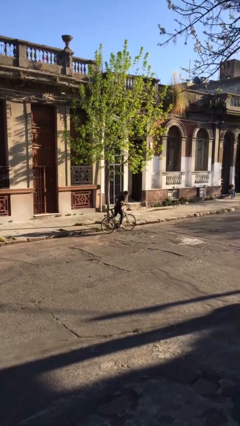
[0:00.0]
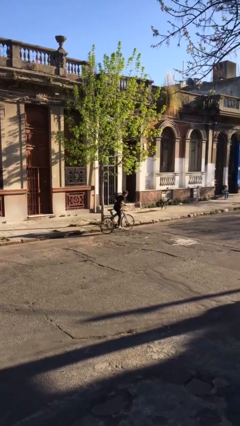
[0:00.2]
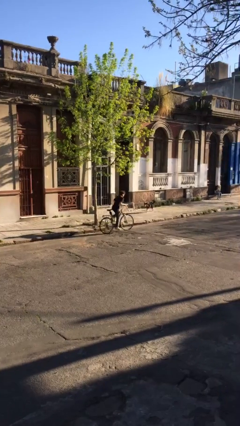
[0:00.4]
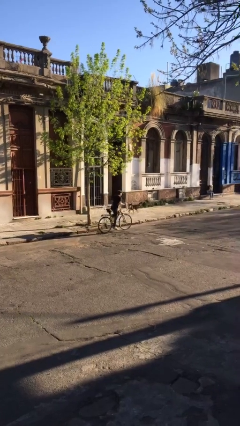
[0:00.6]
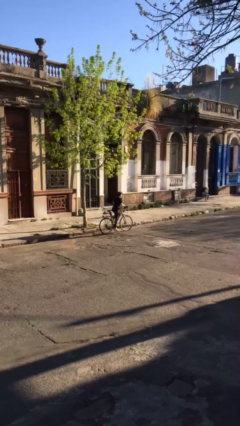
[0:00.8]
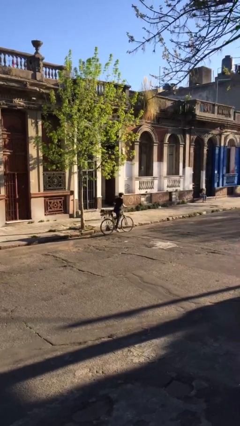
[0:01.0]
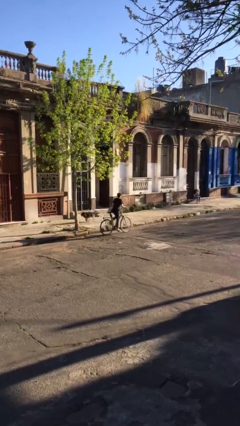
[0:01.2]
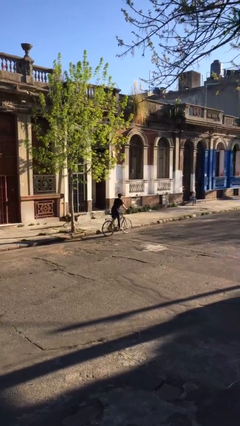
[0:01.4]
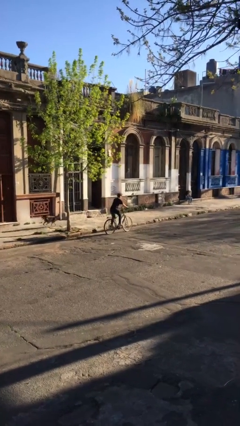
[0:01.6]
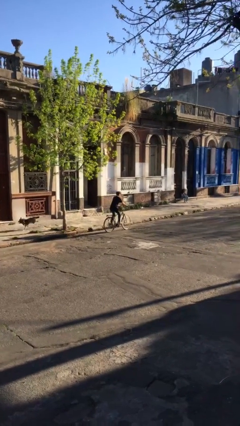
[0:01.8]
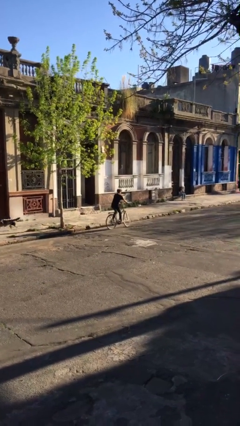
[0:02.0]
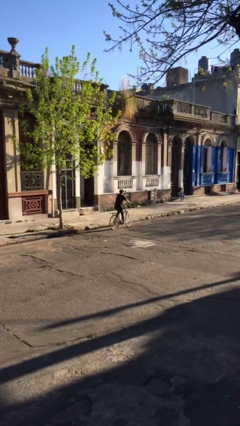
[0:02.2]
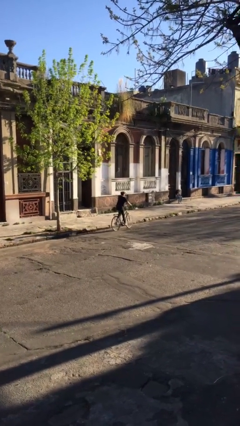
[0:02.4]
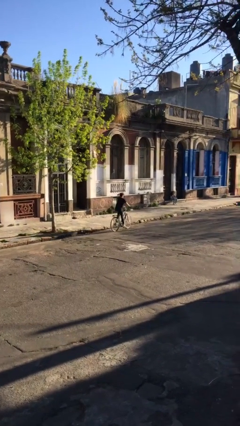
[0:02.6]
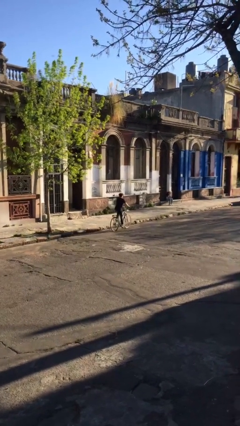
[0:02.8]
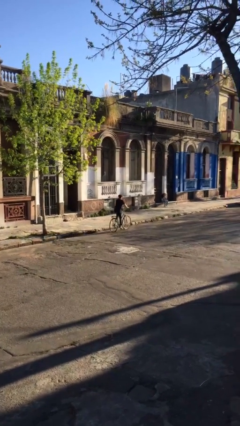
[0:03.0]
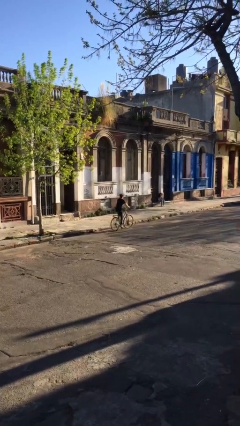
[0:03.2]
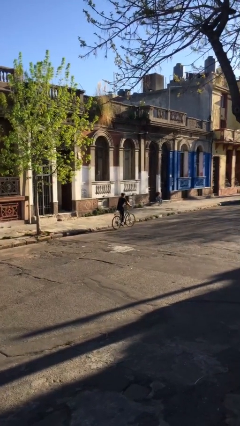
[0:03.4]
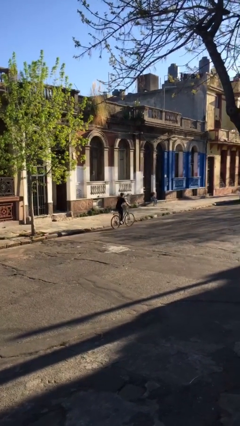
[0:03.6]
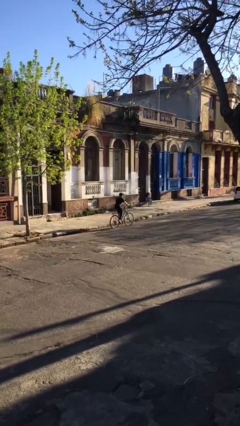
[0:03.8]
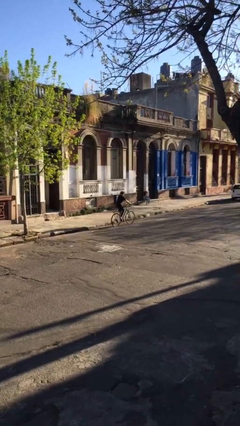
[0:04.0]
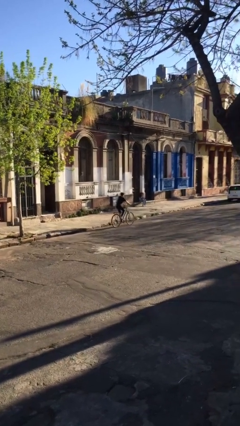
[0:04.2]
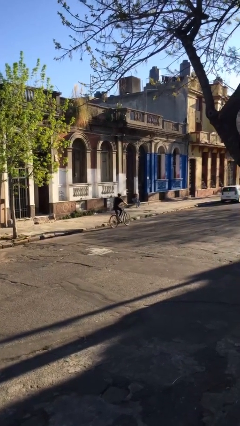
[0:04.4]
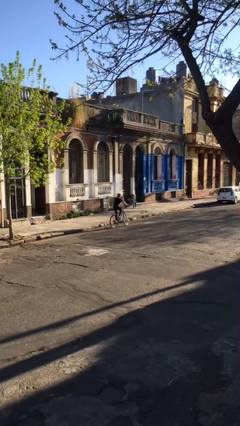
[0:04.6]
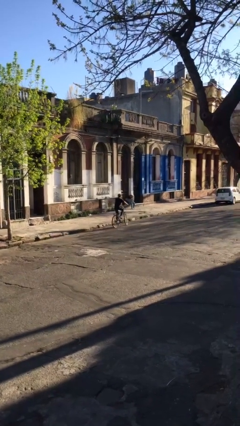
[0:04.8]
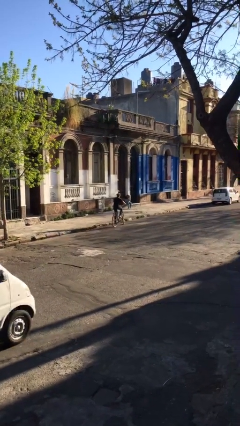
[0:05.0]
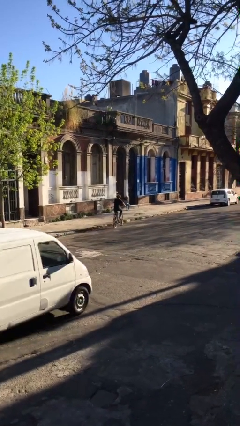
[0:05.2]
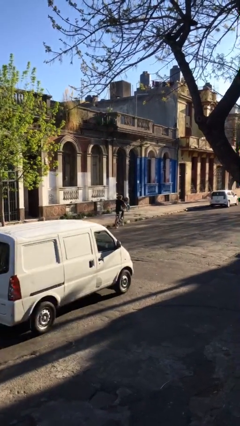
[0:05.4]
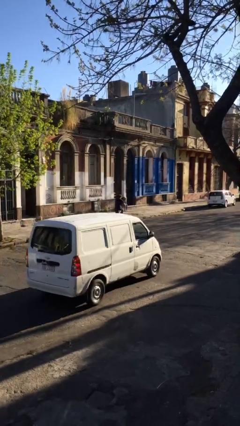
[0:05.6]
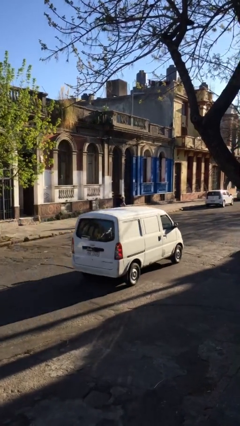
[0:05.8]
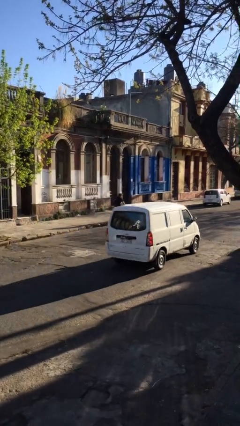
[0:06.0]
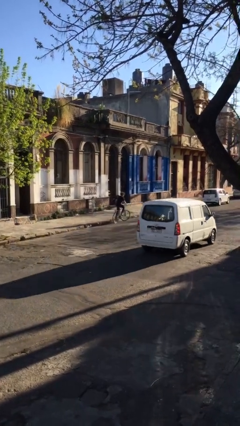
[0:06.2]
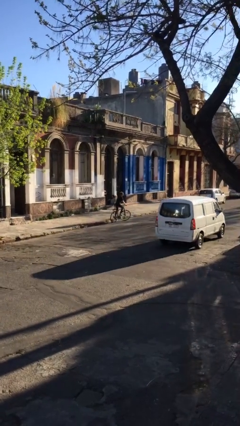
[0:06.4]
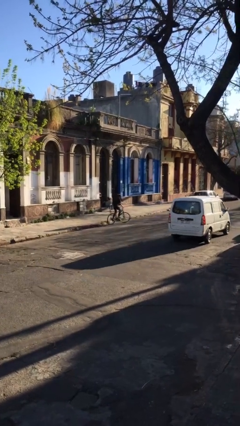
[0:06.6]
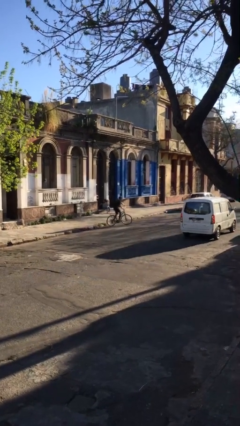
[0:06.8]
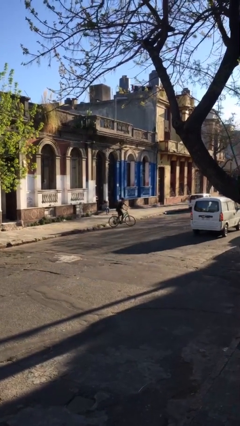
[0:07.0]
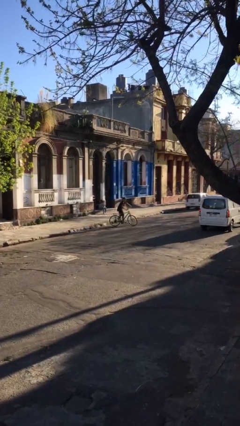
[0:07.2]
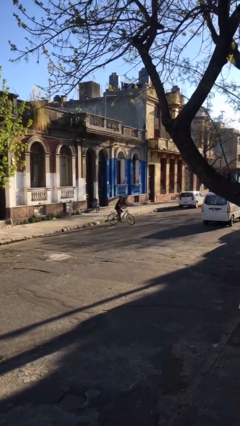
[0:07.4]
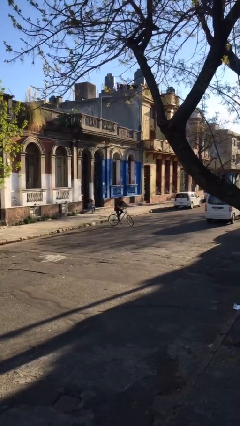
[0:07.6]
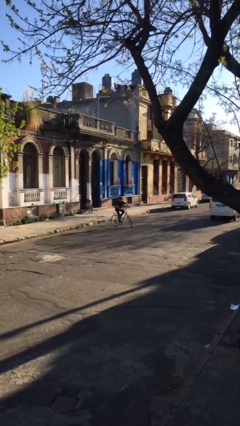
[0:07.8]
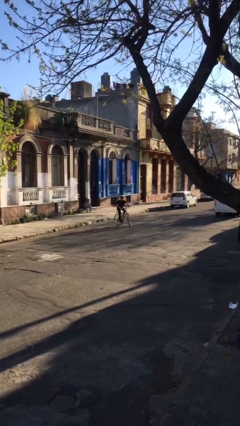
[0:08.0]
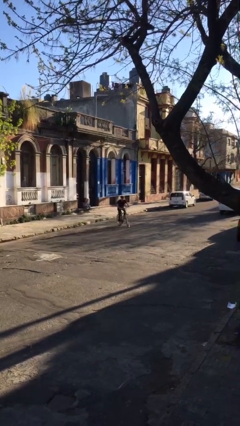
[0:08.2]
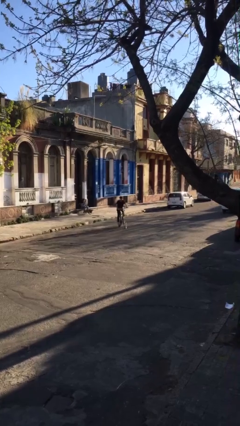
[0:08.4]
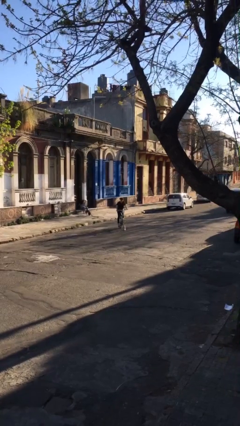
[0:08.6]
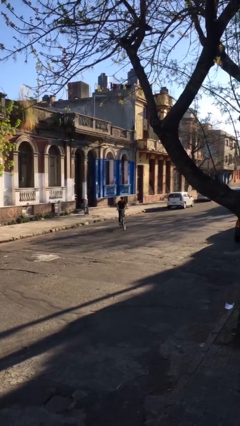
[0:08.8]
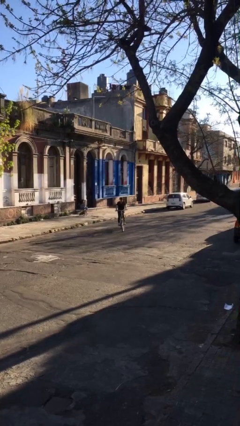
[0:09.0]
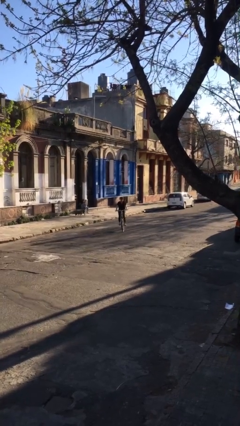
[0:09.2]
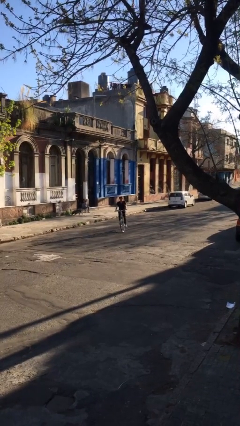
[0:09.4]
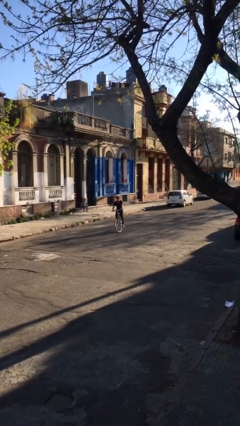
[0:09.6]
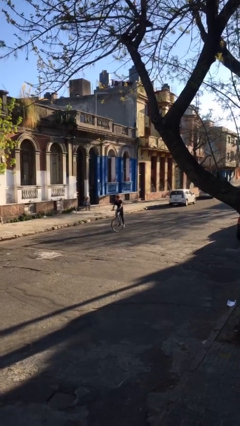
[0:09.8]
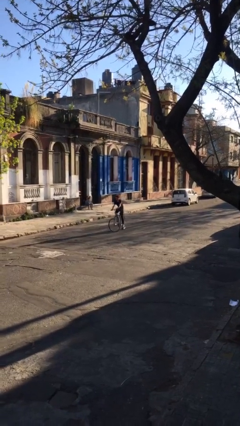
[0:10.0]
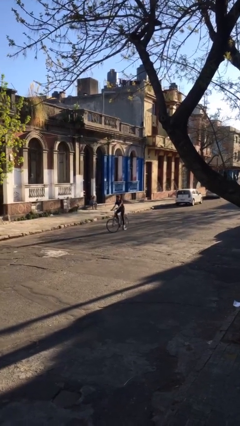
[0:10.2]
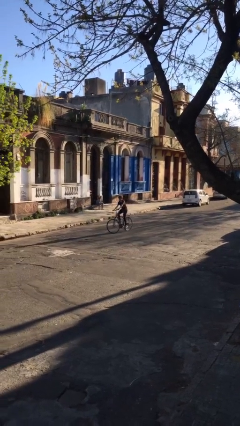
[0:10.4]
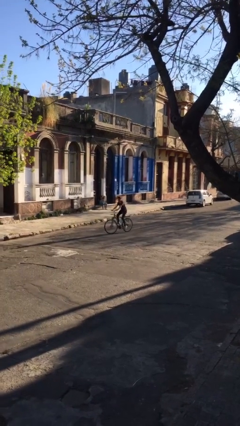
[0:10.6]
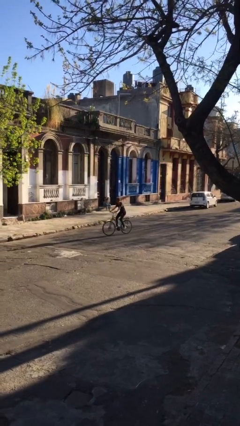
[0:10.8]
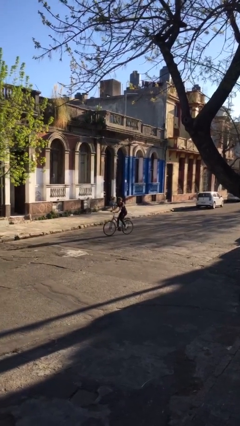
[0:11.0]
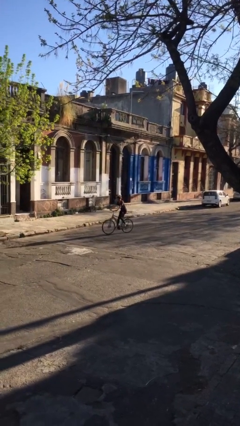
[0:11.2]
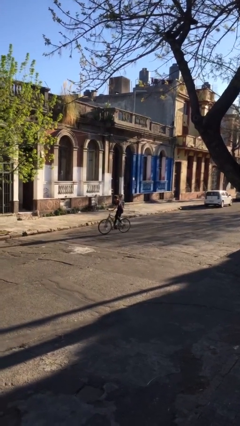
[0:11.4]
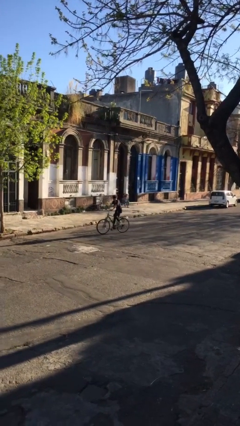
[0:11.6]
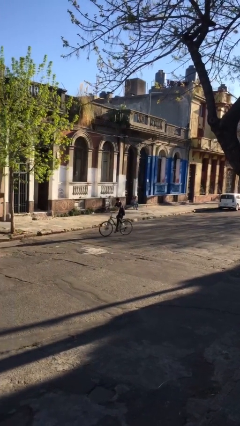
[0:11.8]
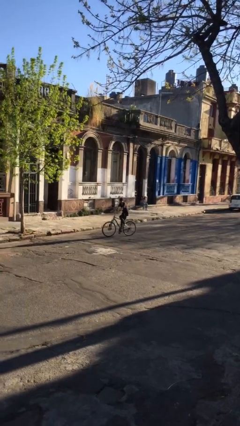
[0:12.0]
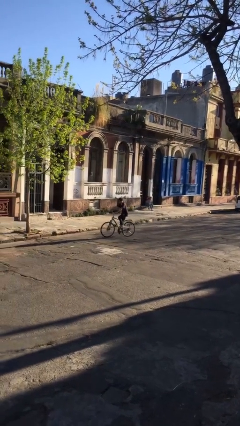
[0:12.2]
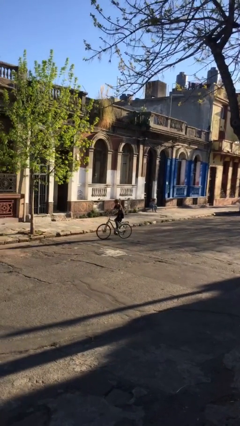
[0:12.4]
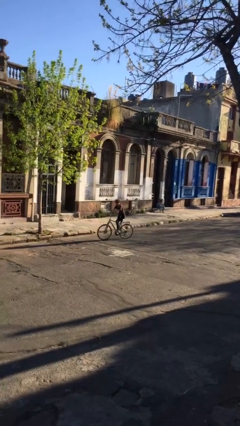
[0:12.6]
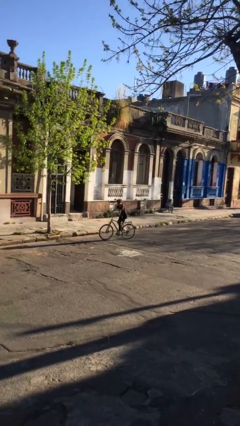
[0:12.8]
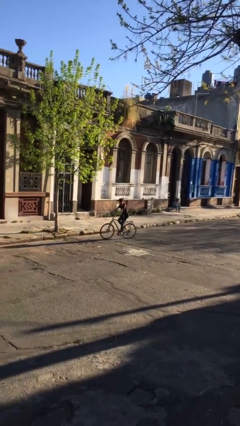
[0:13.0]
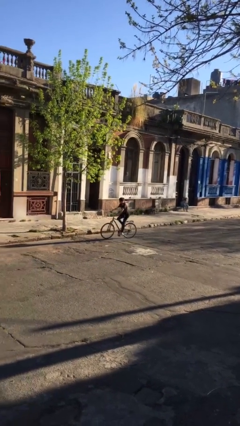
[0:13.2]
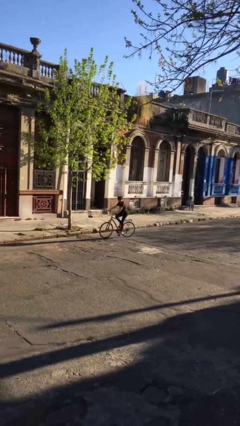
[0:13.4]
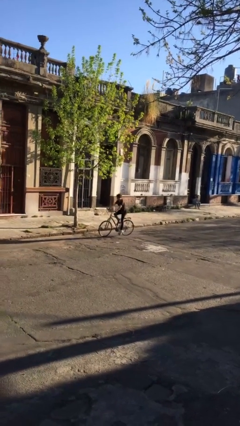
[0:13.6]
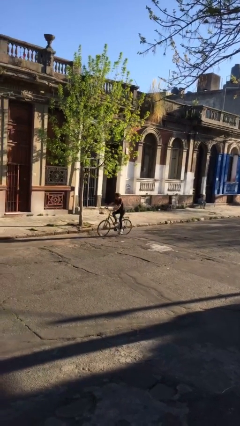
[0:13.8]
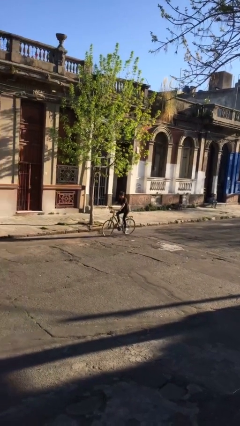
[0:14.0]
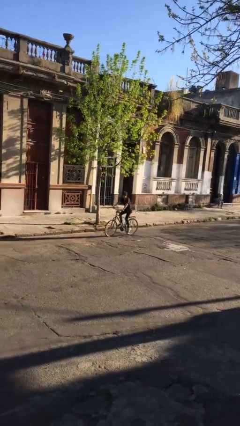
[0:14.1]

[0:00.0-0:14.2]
person rides bicycle

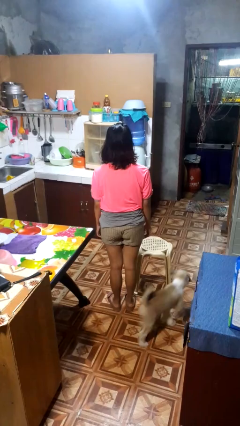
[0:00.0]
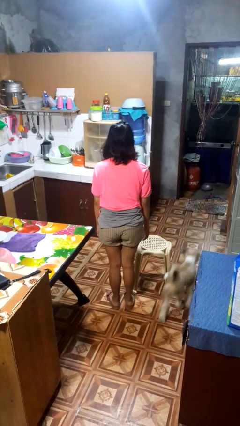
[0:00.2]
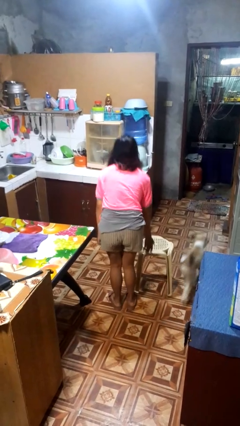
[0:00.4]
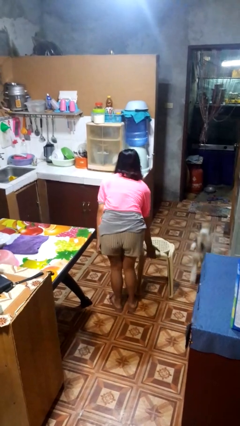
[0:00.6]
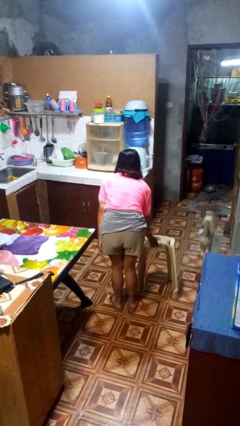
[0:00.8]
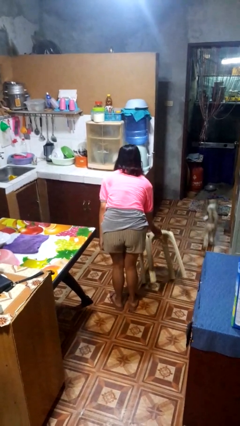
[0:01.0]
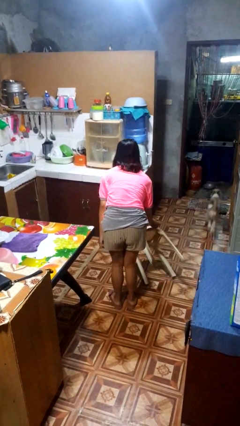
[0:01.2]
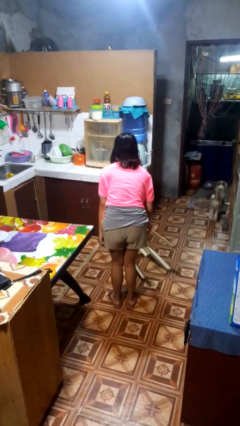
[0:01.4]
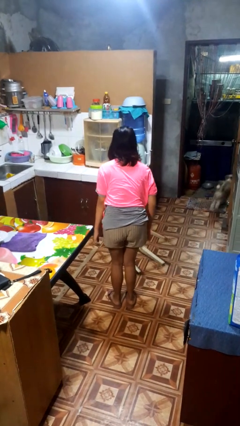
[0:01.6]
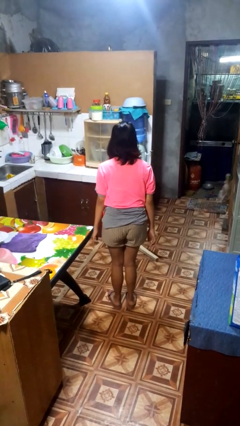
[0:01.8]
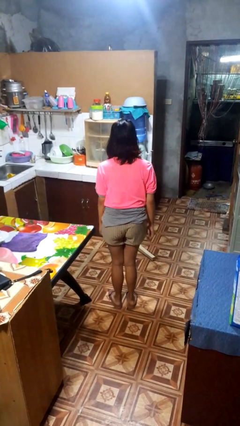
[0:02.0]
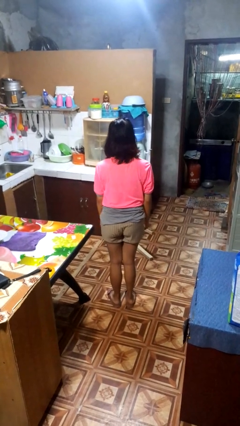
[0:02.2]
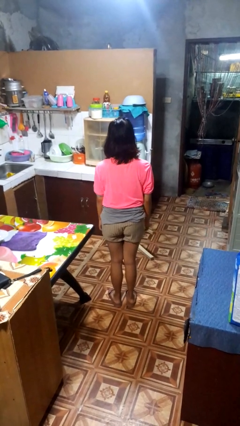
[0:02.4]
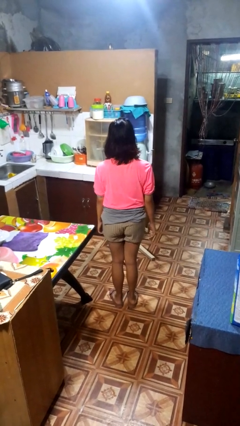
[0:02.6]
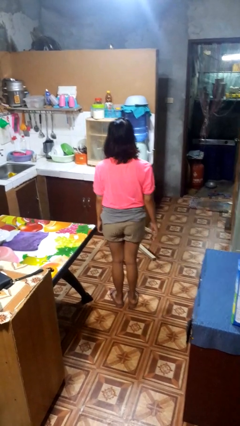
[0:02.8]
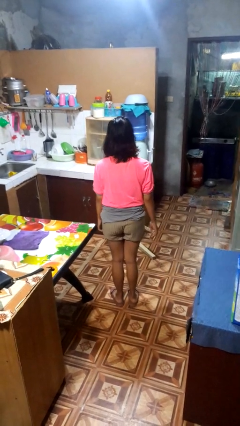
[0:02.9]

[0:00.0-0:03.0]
person knocks over furniture

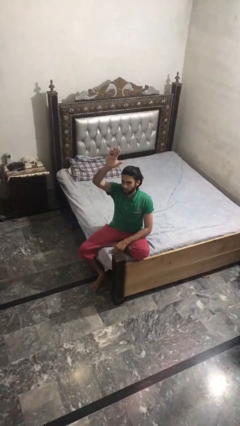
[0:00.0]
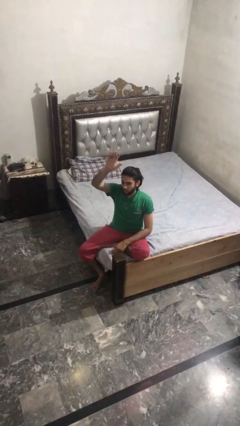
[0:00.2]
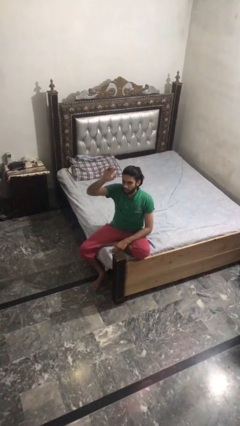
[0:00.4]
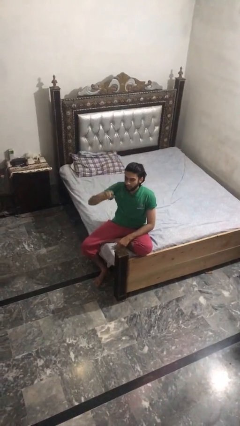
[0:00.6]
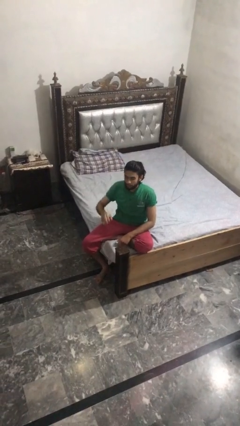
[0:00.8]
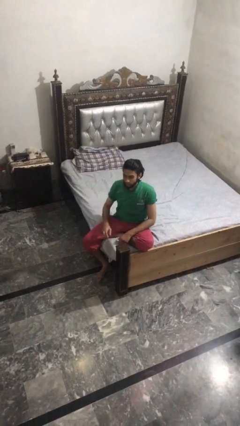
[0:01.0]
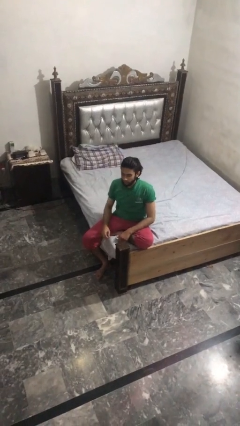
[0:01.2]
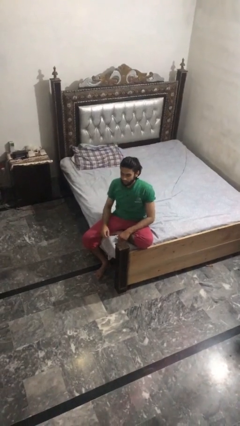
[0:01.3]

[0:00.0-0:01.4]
person gestures lower hand
